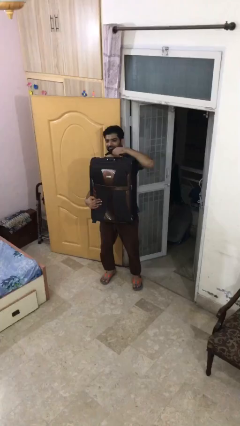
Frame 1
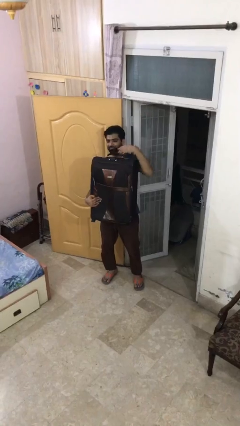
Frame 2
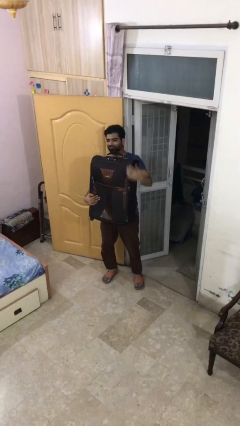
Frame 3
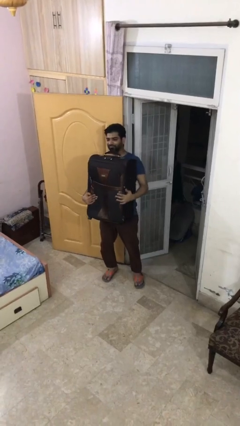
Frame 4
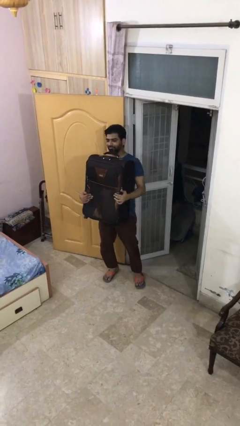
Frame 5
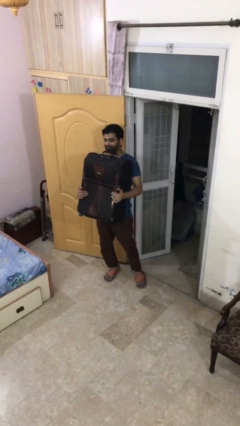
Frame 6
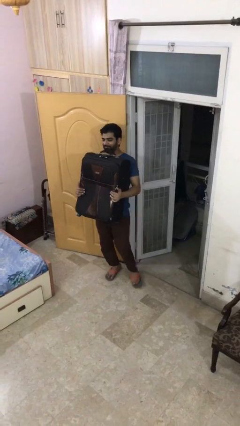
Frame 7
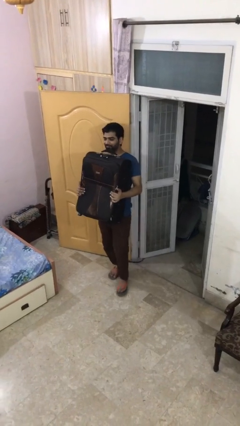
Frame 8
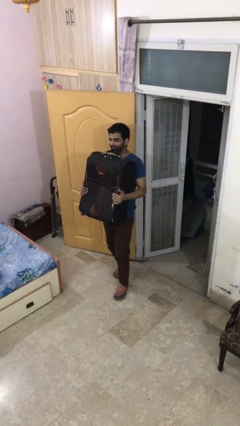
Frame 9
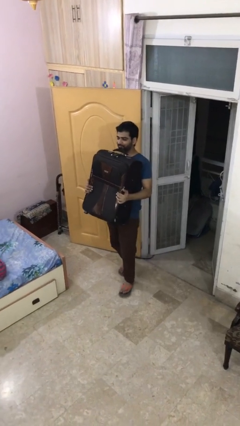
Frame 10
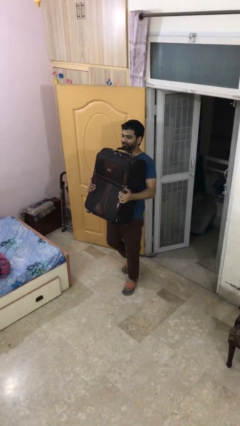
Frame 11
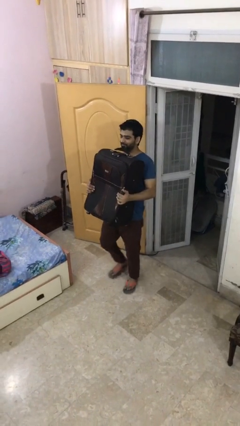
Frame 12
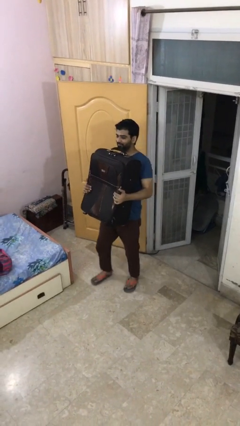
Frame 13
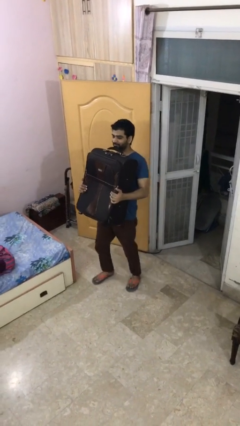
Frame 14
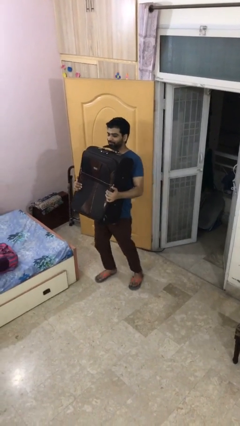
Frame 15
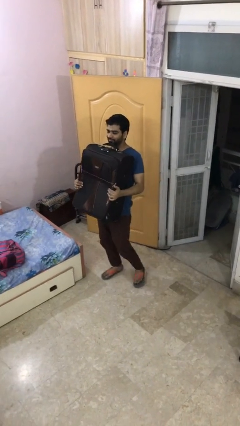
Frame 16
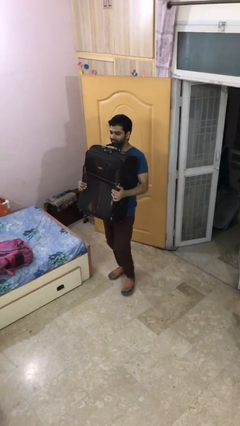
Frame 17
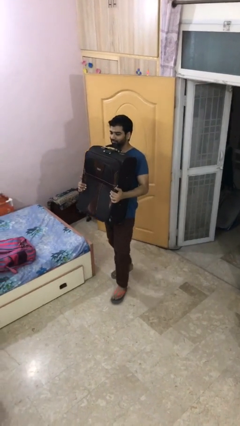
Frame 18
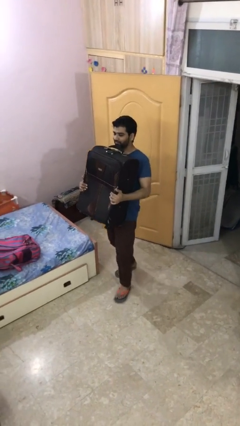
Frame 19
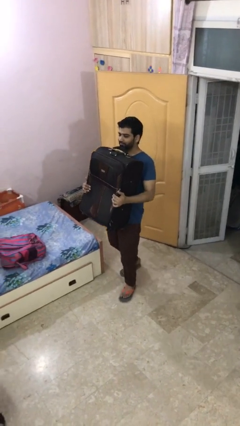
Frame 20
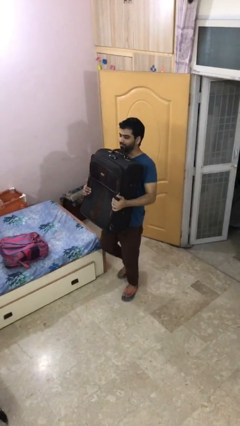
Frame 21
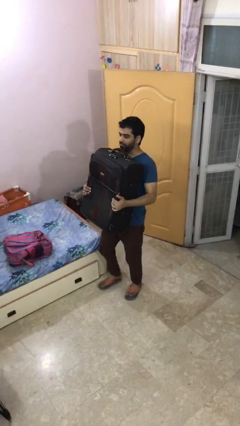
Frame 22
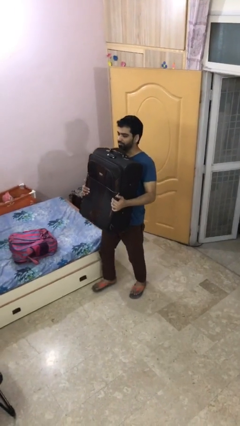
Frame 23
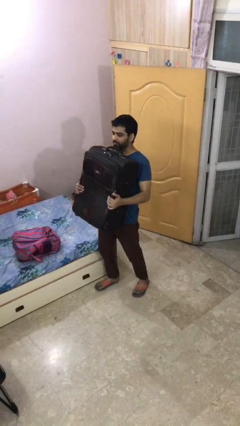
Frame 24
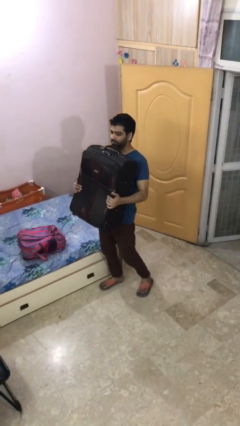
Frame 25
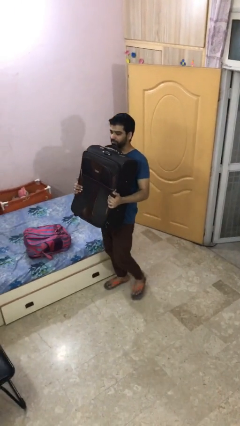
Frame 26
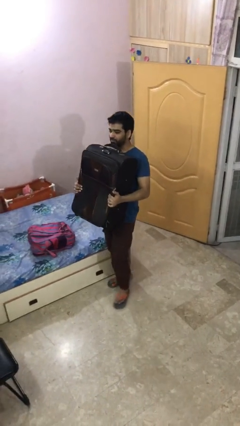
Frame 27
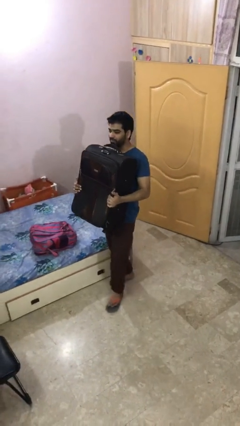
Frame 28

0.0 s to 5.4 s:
person carries heavy object

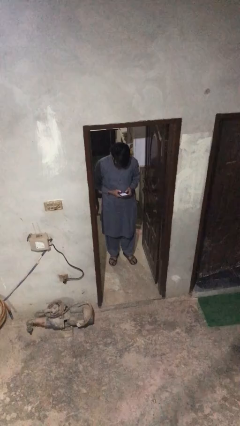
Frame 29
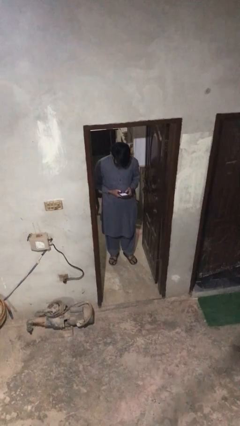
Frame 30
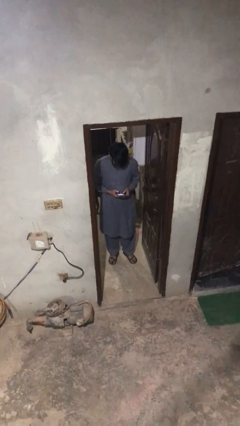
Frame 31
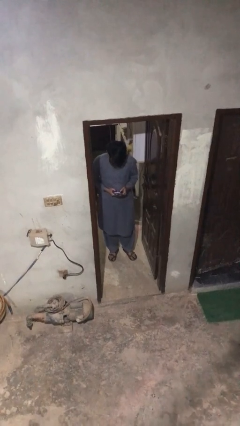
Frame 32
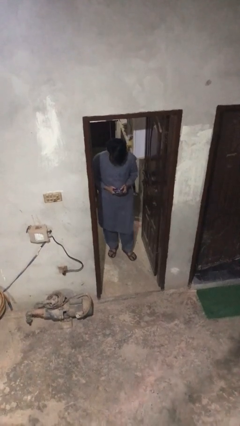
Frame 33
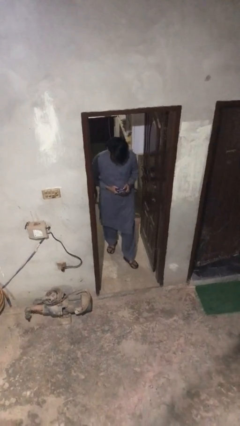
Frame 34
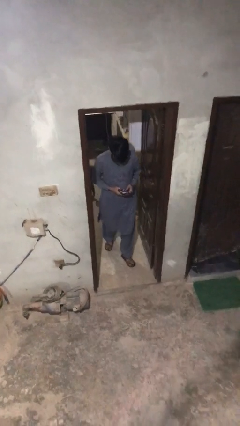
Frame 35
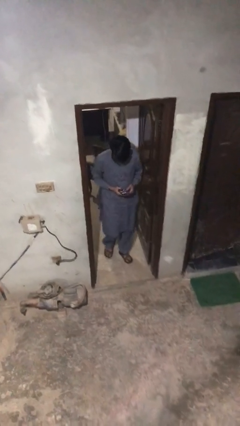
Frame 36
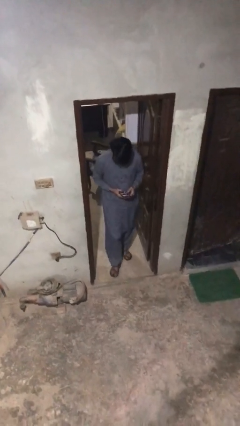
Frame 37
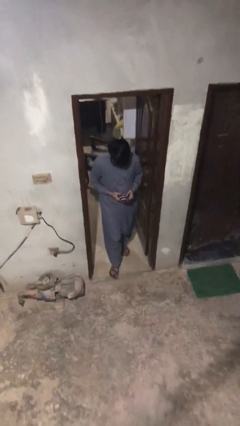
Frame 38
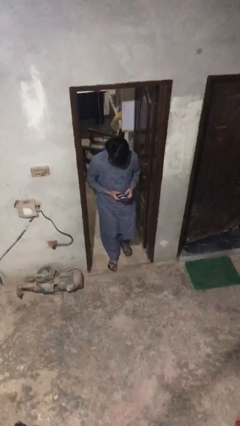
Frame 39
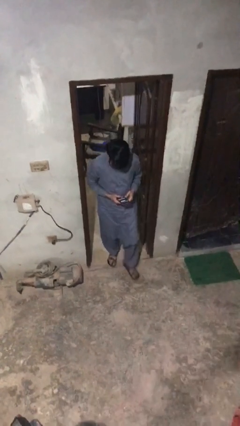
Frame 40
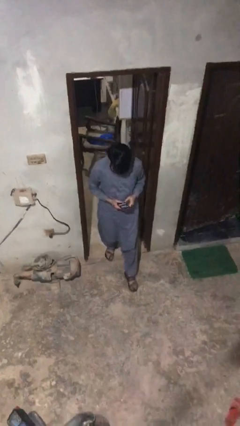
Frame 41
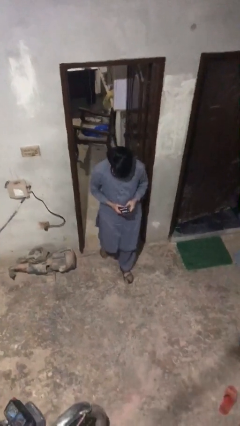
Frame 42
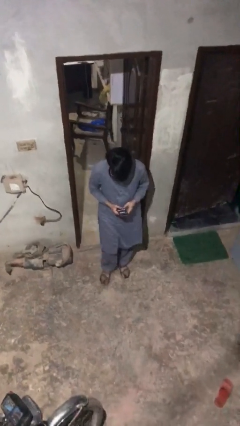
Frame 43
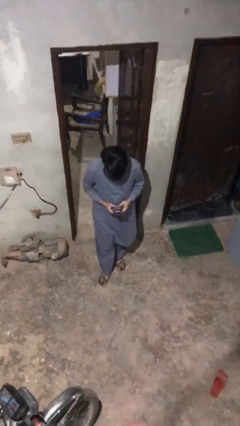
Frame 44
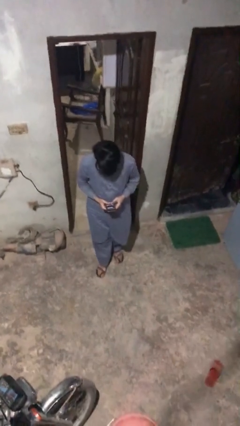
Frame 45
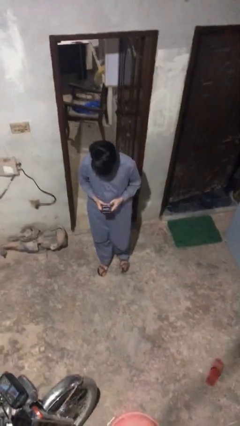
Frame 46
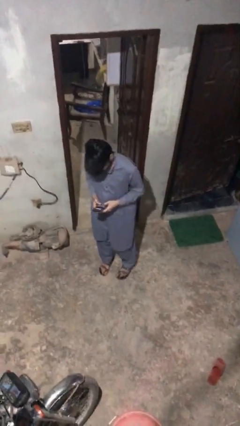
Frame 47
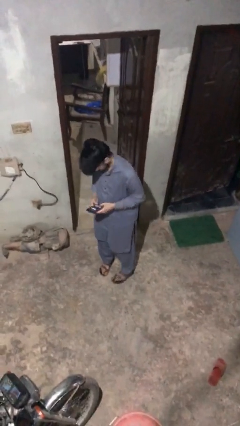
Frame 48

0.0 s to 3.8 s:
person exits scene through structure

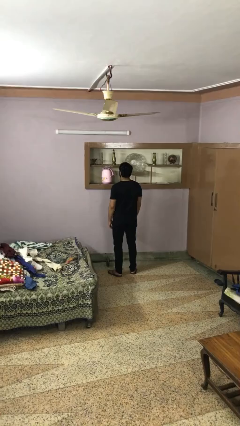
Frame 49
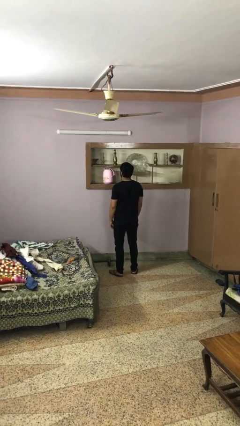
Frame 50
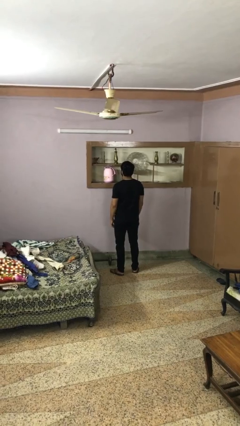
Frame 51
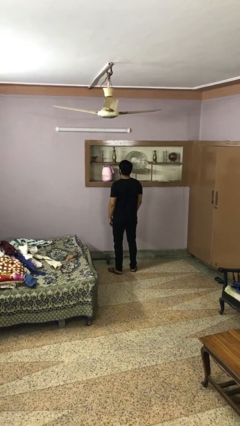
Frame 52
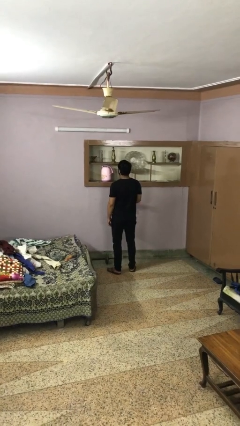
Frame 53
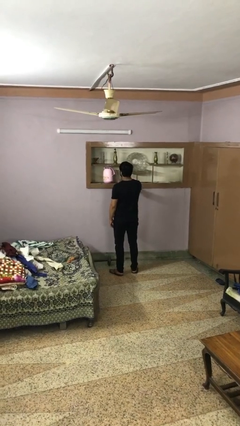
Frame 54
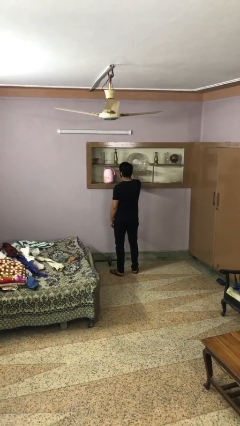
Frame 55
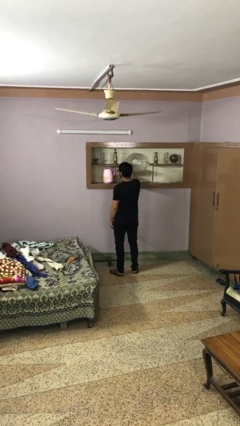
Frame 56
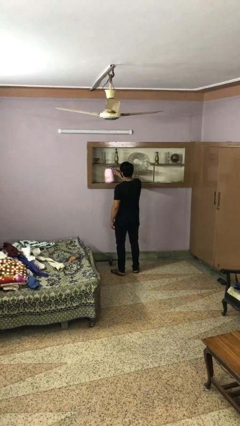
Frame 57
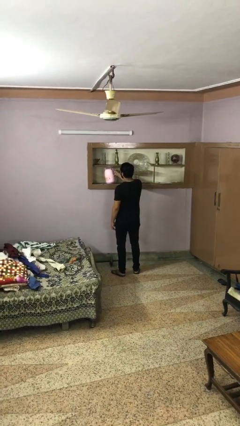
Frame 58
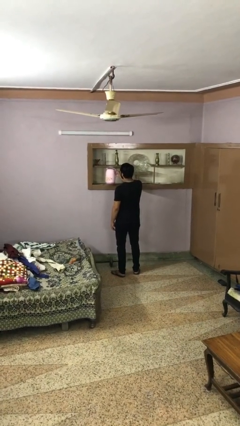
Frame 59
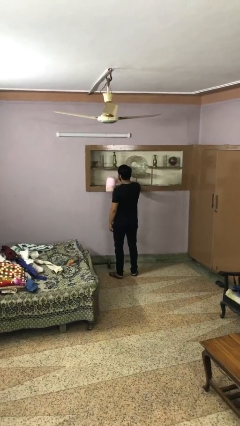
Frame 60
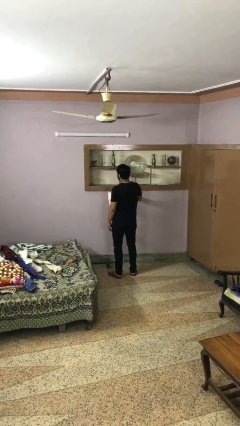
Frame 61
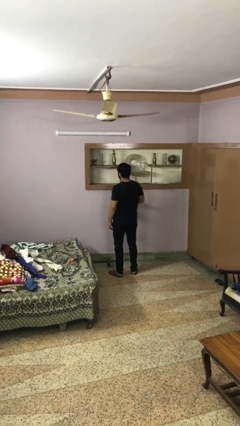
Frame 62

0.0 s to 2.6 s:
person picks up object from countertop

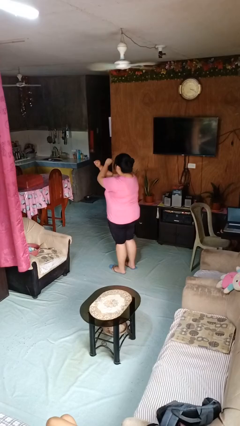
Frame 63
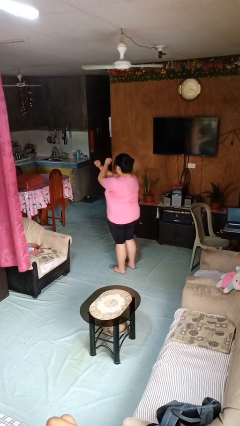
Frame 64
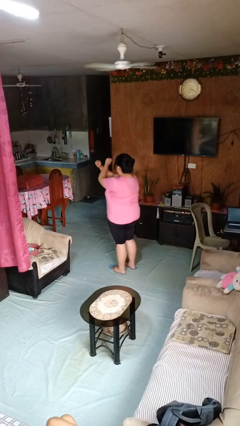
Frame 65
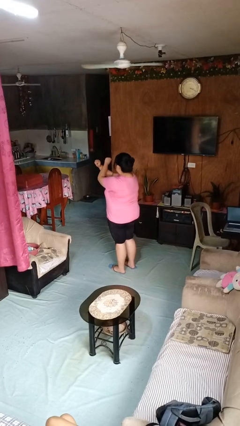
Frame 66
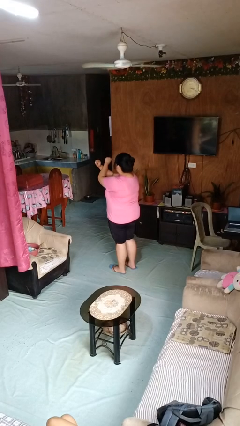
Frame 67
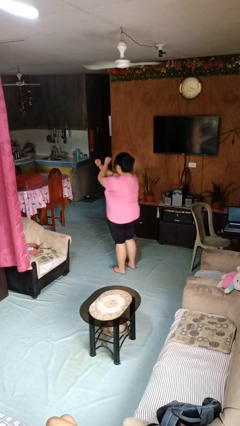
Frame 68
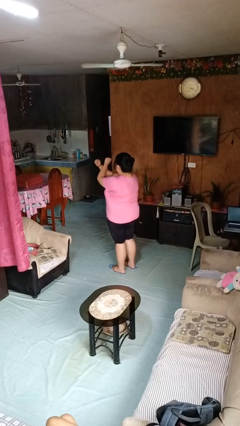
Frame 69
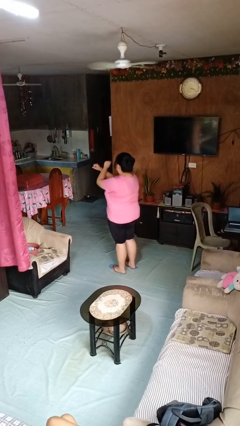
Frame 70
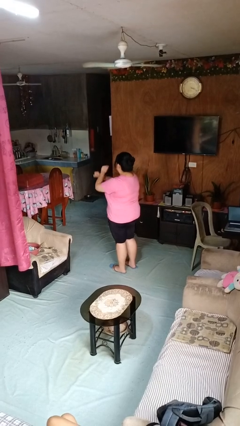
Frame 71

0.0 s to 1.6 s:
person gestures arms x

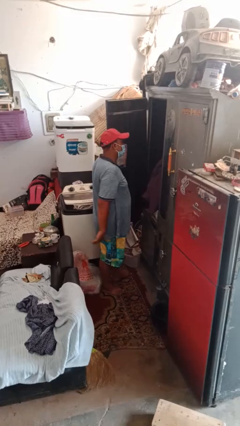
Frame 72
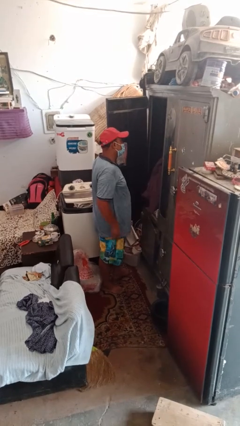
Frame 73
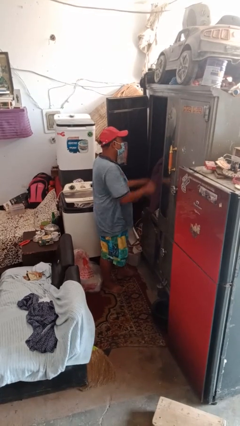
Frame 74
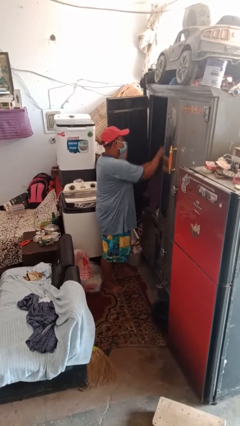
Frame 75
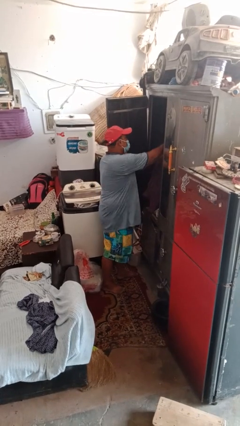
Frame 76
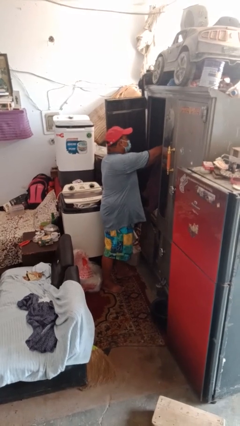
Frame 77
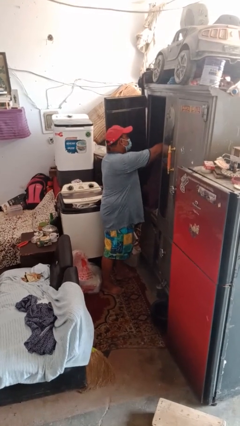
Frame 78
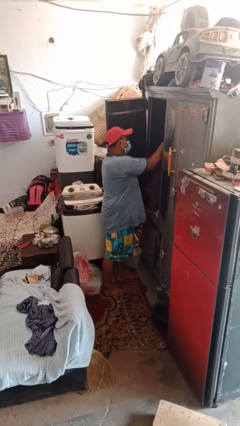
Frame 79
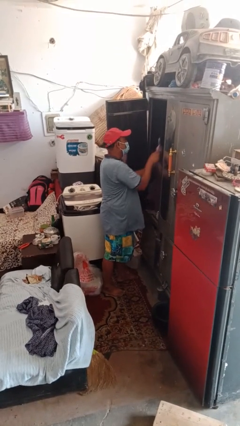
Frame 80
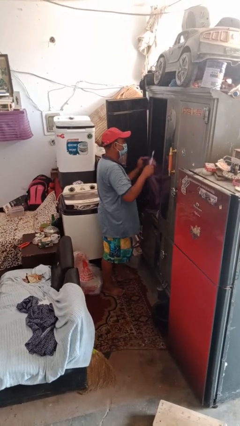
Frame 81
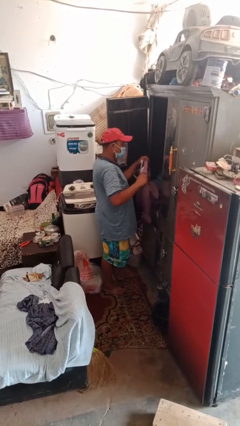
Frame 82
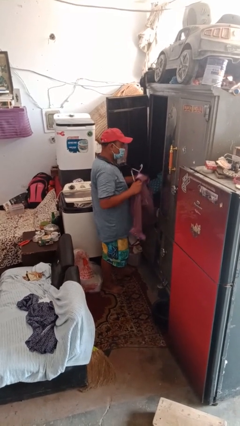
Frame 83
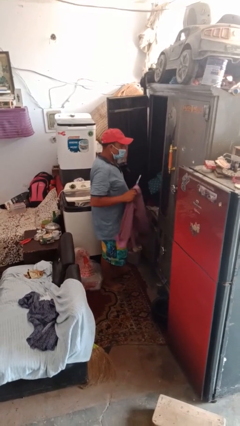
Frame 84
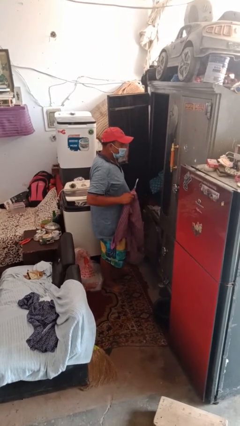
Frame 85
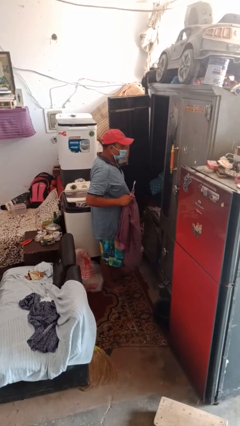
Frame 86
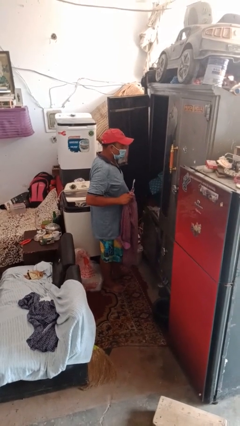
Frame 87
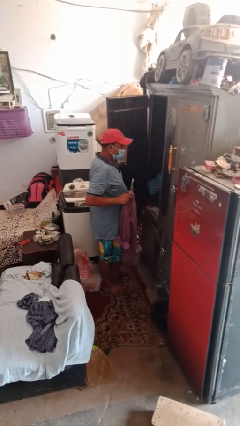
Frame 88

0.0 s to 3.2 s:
person takes clothes from closet

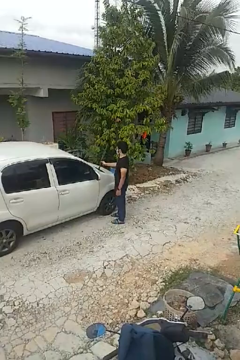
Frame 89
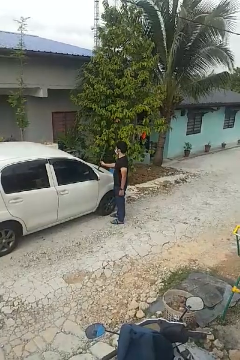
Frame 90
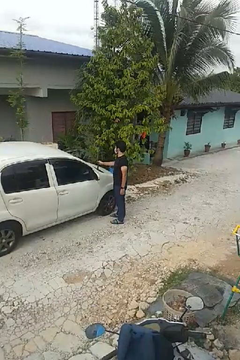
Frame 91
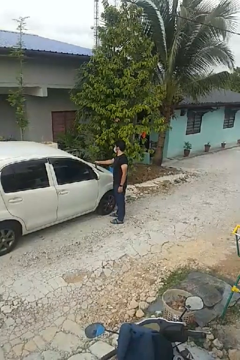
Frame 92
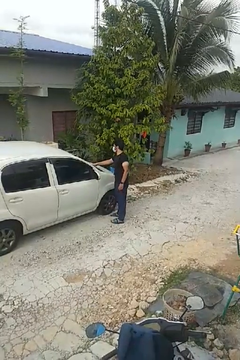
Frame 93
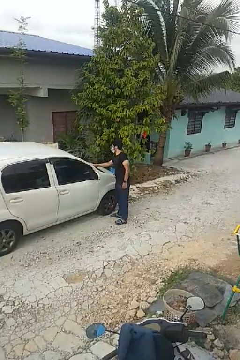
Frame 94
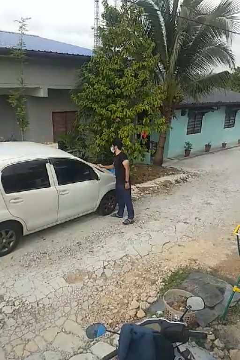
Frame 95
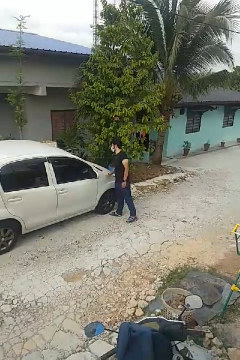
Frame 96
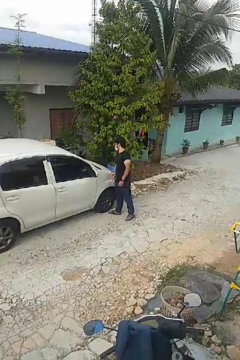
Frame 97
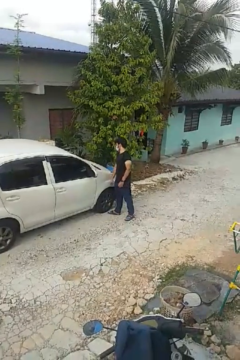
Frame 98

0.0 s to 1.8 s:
person flips down car wipers
